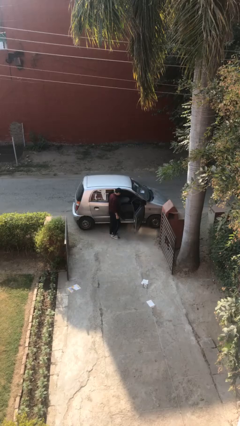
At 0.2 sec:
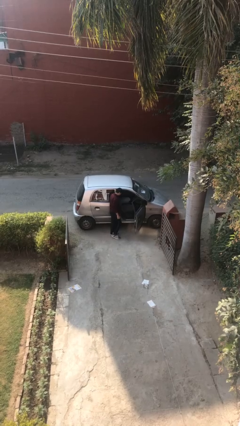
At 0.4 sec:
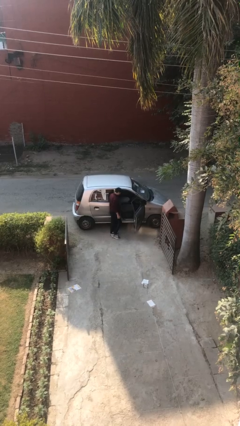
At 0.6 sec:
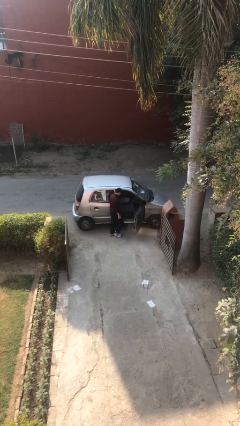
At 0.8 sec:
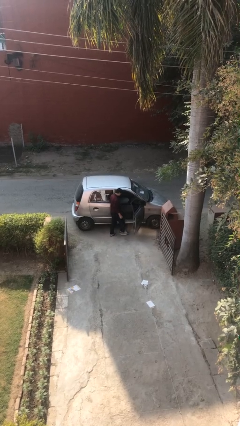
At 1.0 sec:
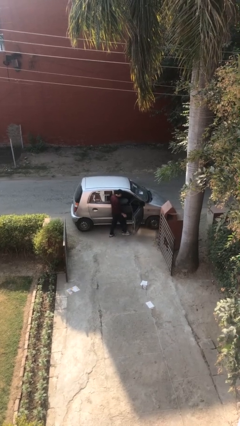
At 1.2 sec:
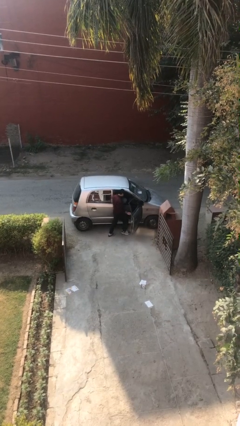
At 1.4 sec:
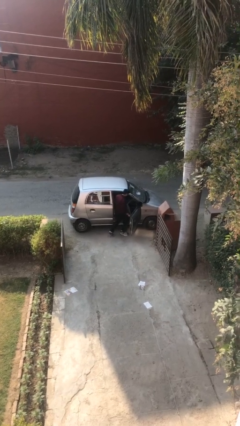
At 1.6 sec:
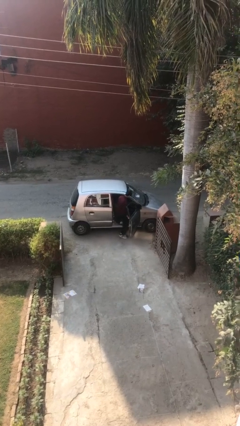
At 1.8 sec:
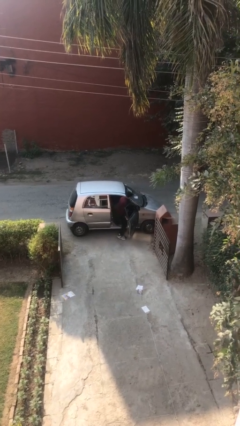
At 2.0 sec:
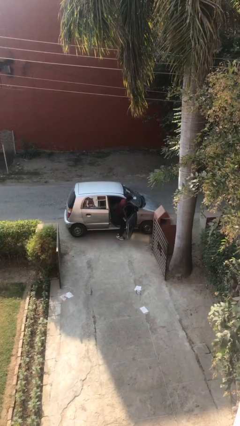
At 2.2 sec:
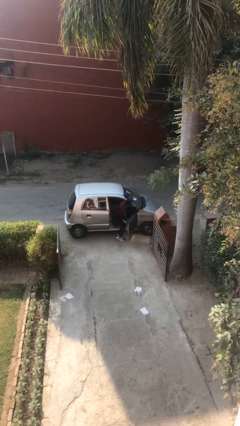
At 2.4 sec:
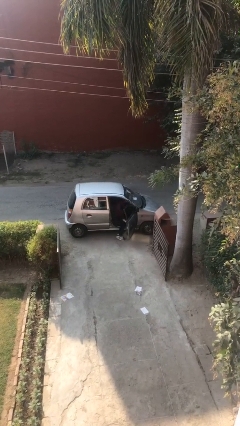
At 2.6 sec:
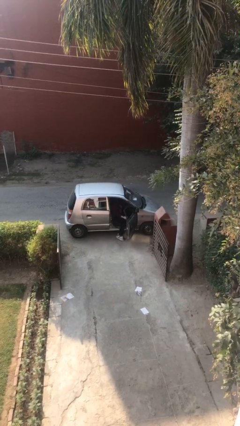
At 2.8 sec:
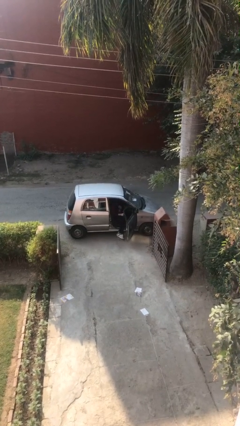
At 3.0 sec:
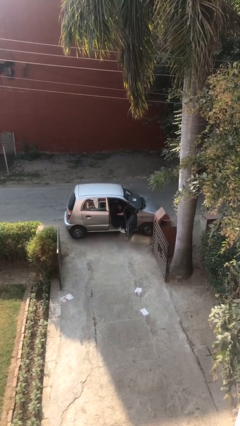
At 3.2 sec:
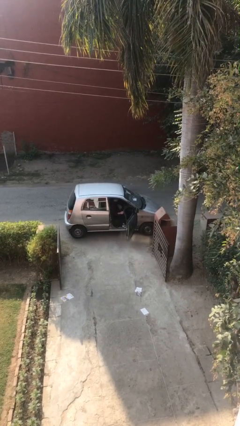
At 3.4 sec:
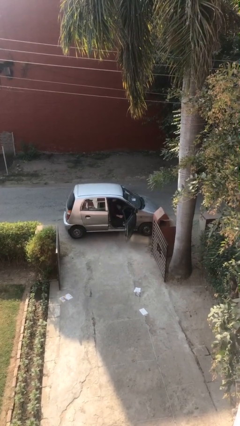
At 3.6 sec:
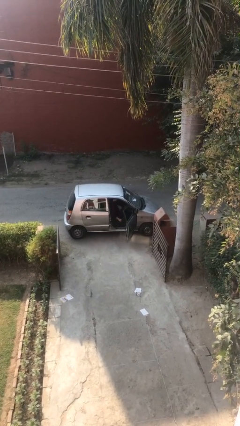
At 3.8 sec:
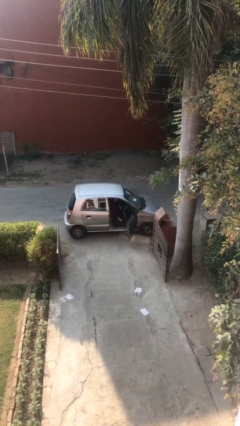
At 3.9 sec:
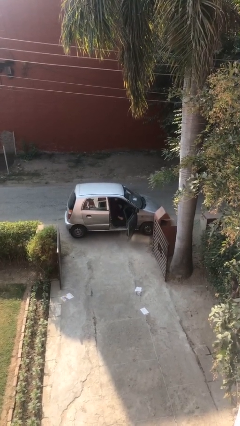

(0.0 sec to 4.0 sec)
person enters car

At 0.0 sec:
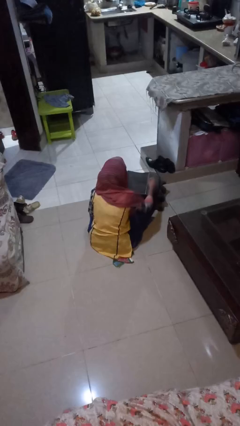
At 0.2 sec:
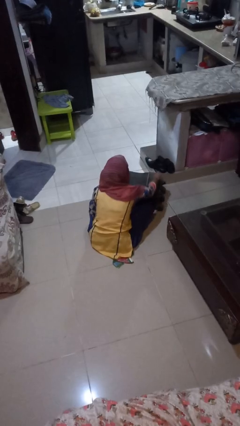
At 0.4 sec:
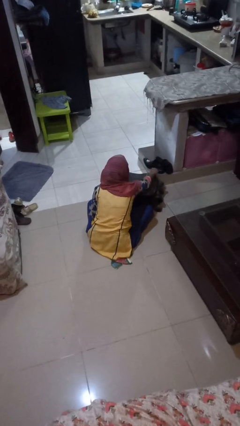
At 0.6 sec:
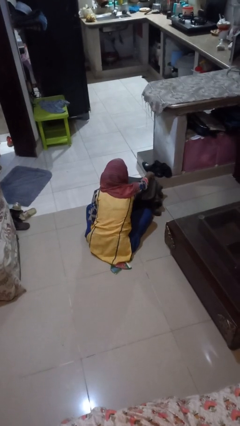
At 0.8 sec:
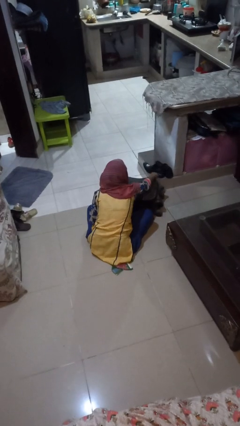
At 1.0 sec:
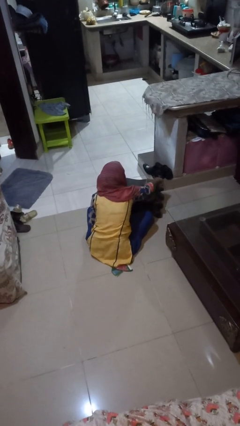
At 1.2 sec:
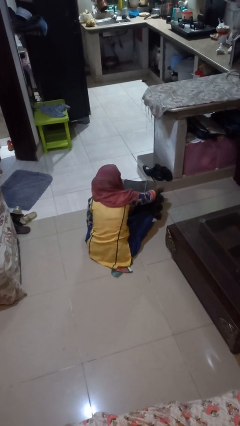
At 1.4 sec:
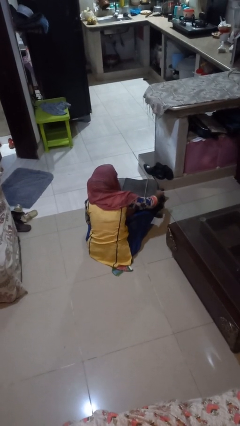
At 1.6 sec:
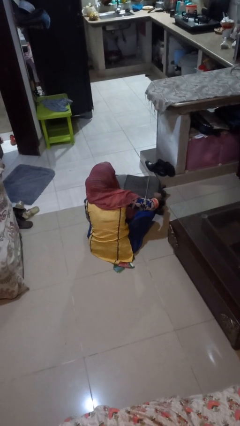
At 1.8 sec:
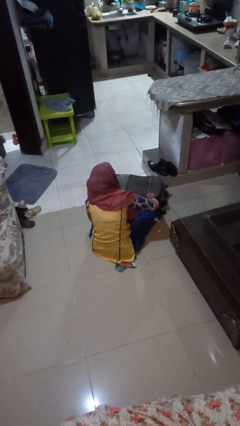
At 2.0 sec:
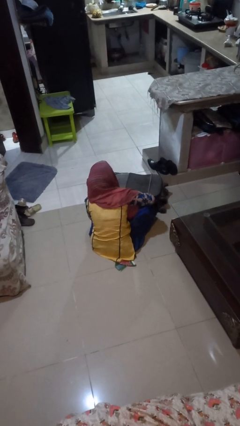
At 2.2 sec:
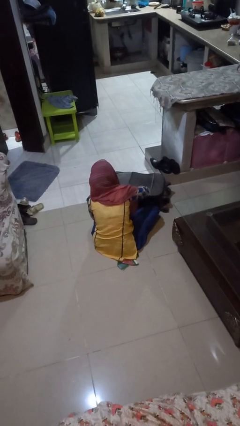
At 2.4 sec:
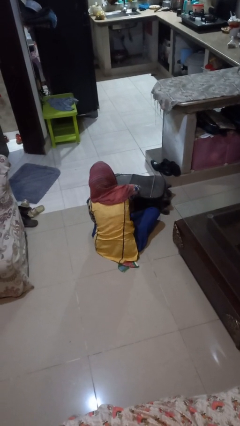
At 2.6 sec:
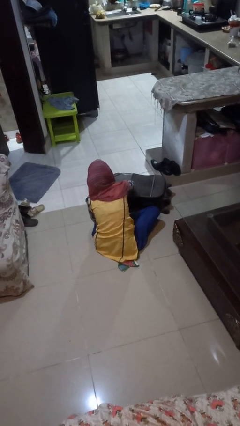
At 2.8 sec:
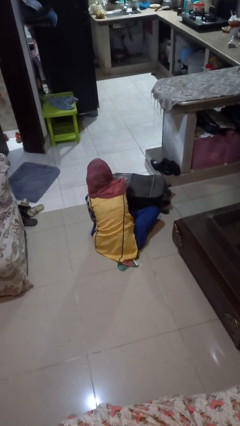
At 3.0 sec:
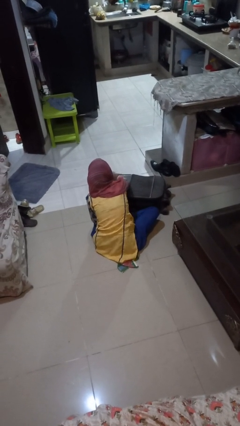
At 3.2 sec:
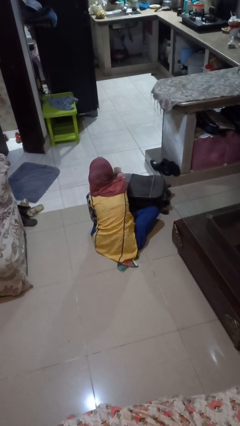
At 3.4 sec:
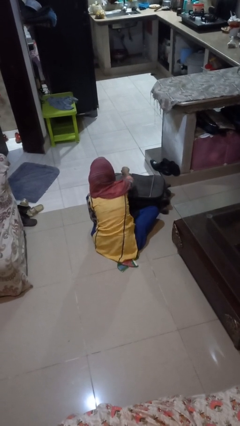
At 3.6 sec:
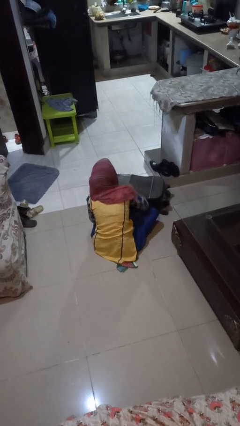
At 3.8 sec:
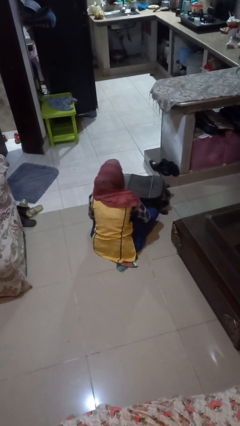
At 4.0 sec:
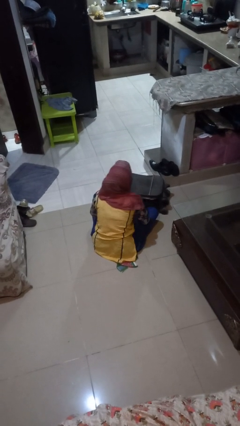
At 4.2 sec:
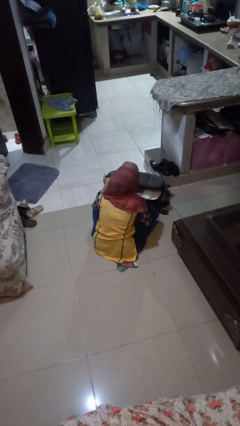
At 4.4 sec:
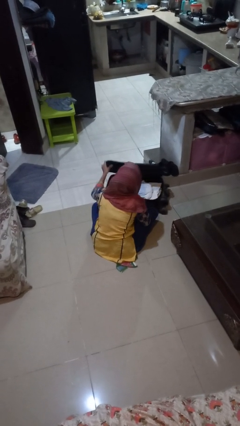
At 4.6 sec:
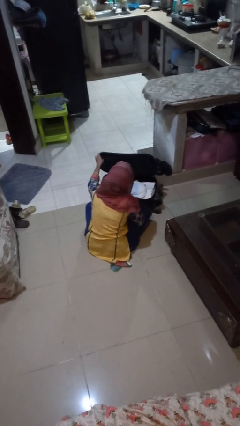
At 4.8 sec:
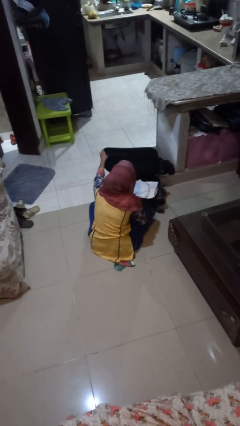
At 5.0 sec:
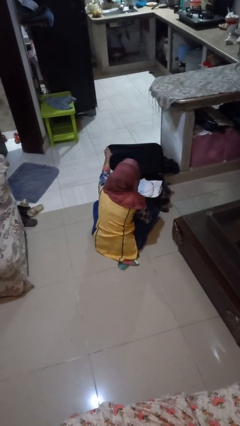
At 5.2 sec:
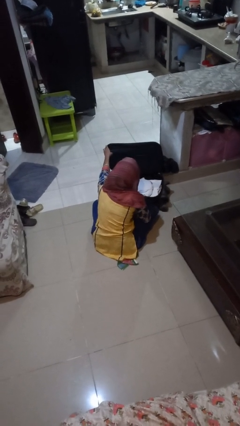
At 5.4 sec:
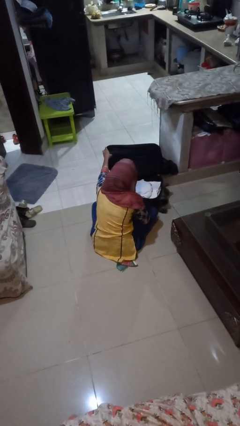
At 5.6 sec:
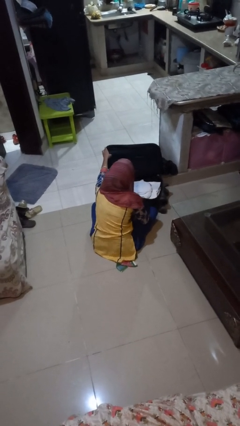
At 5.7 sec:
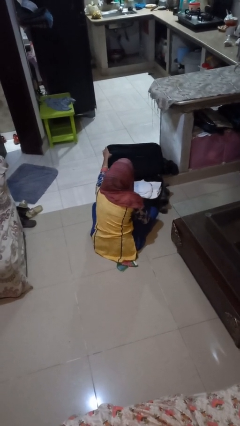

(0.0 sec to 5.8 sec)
person opens suitcase

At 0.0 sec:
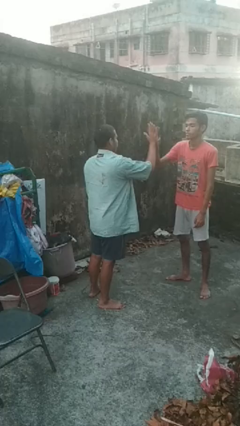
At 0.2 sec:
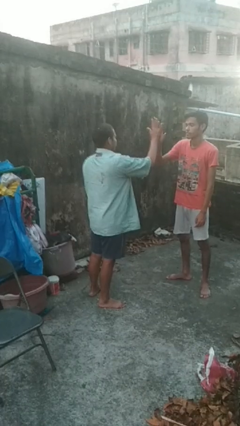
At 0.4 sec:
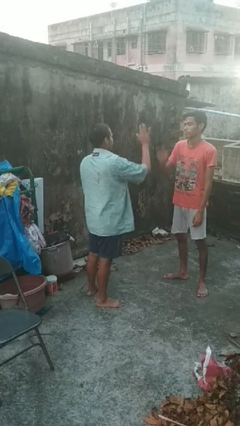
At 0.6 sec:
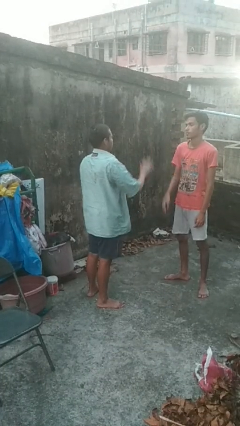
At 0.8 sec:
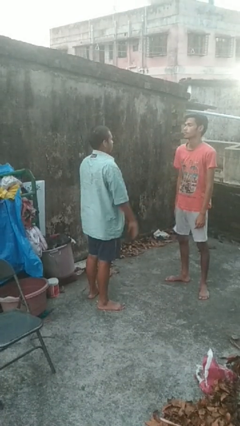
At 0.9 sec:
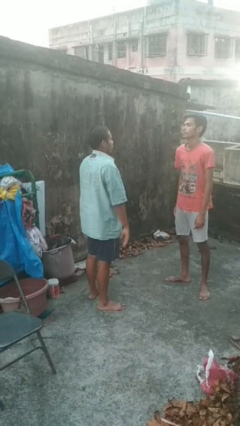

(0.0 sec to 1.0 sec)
person highfives hand

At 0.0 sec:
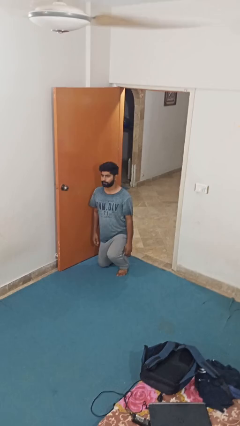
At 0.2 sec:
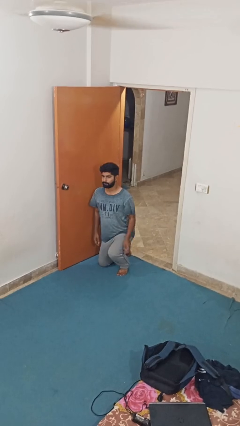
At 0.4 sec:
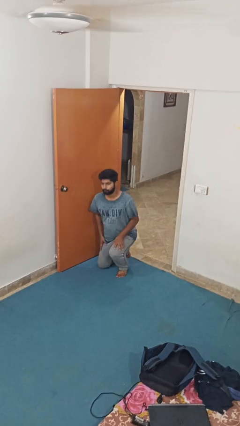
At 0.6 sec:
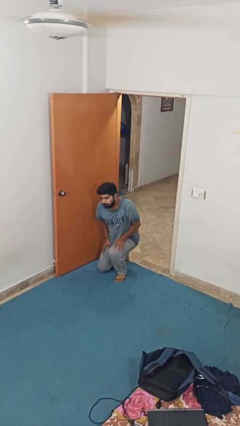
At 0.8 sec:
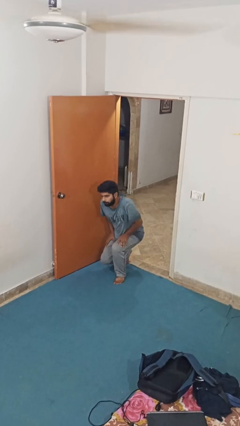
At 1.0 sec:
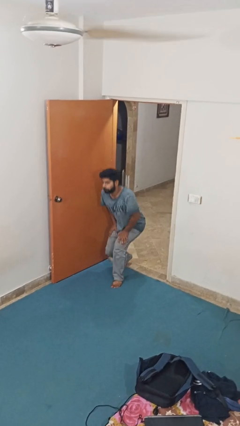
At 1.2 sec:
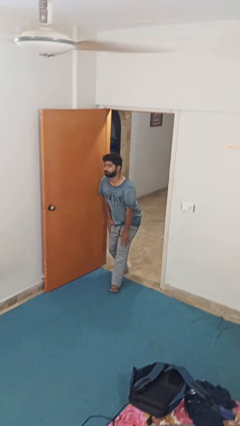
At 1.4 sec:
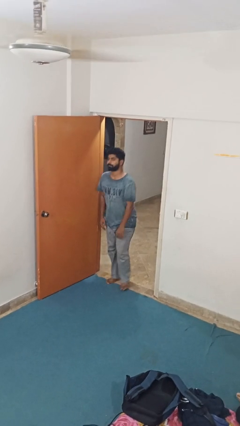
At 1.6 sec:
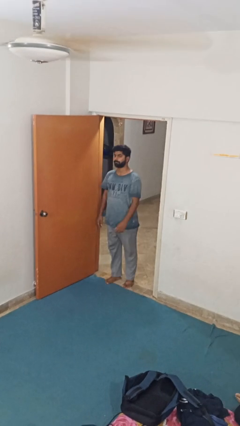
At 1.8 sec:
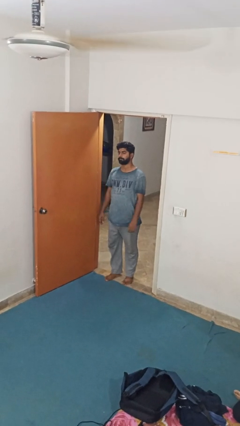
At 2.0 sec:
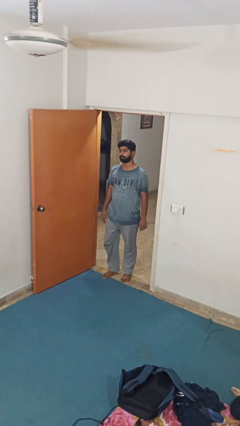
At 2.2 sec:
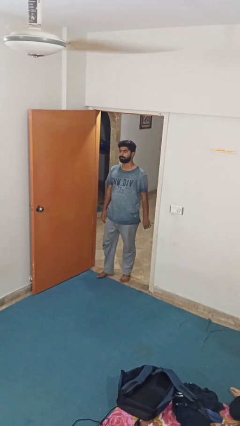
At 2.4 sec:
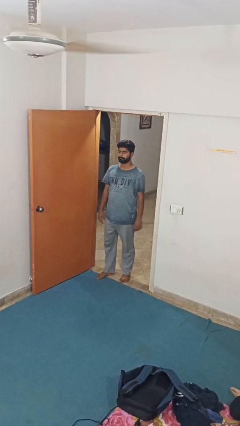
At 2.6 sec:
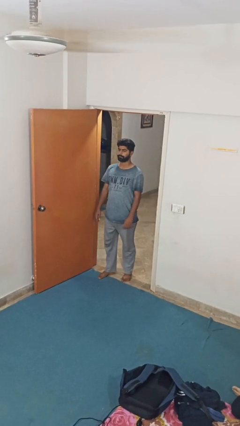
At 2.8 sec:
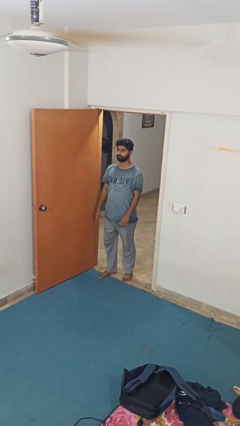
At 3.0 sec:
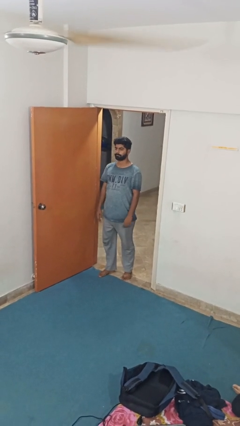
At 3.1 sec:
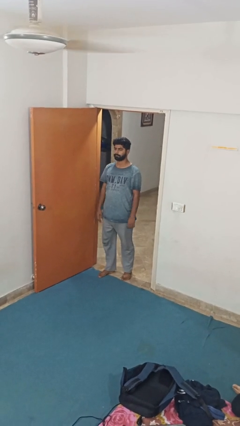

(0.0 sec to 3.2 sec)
person stands up from floor

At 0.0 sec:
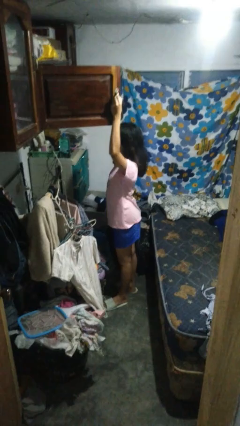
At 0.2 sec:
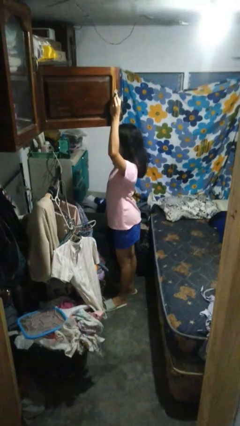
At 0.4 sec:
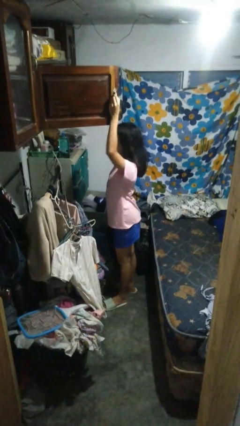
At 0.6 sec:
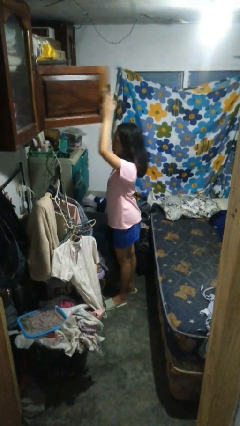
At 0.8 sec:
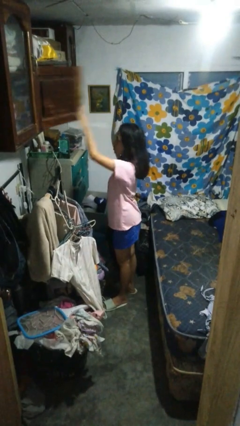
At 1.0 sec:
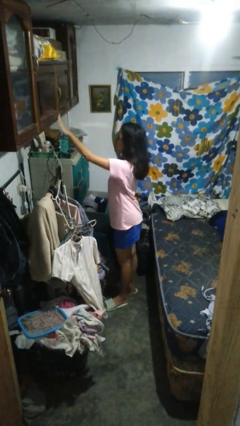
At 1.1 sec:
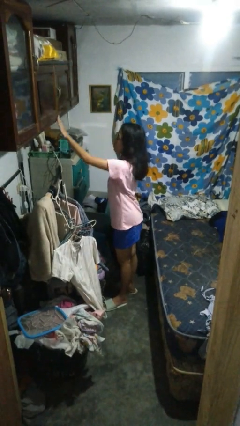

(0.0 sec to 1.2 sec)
person closes closet door

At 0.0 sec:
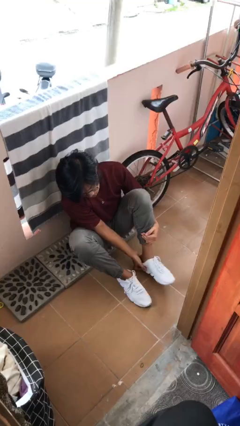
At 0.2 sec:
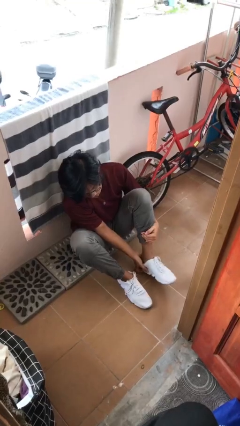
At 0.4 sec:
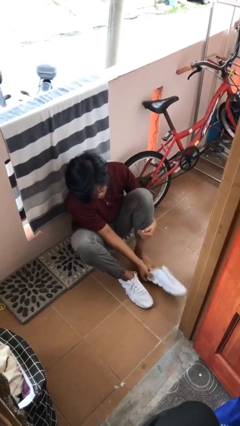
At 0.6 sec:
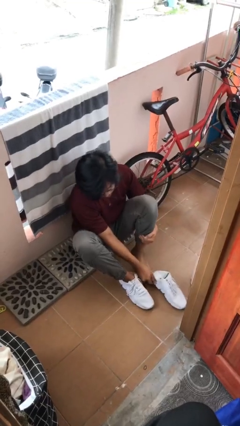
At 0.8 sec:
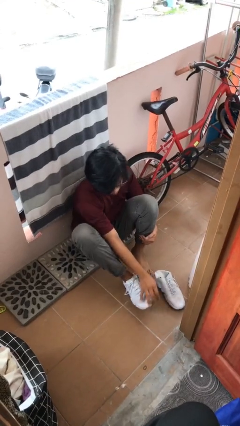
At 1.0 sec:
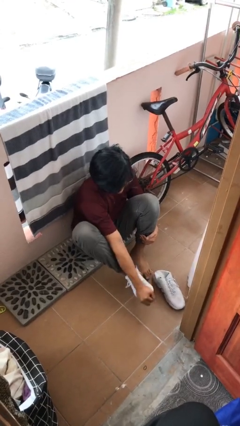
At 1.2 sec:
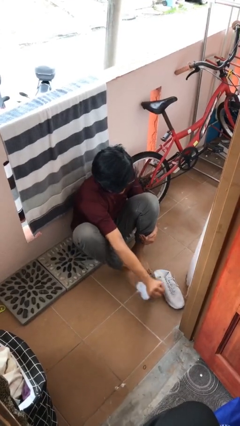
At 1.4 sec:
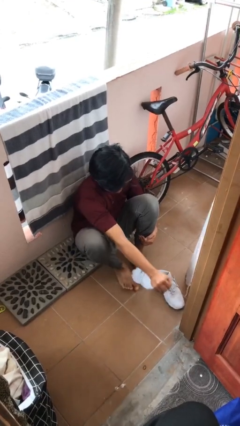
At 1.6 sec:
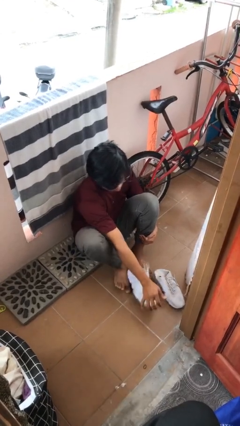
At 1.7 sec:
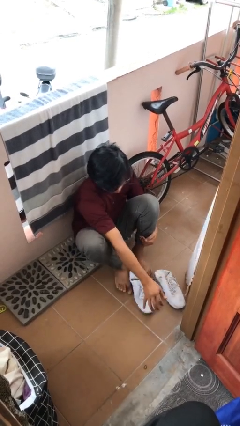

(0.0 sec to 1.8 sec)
person takes off shoes

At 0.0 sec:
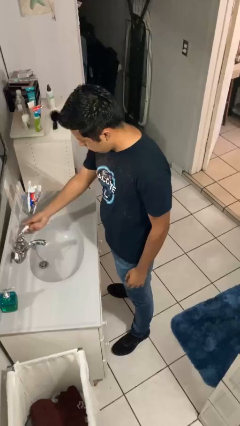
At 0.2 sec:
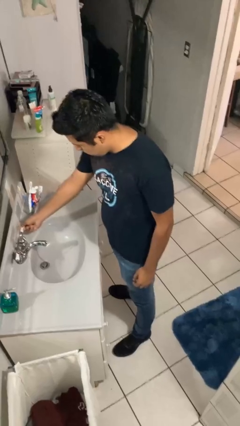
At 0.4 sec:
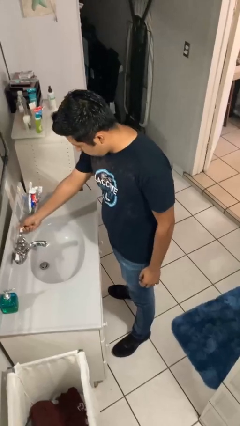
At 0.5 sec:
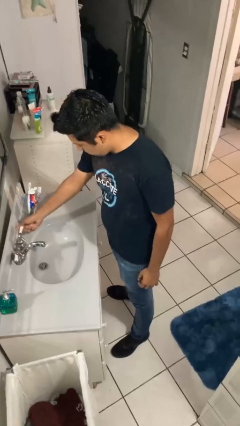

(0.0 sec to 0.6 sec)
person turns off faucet
